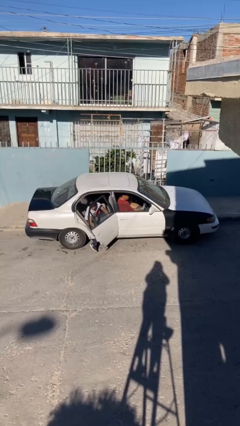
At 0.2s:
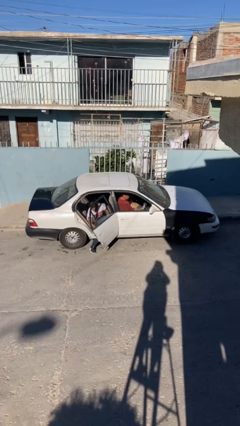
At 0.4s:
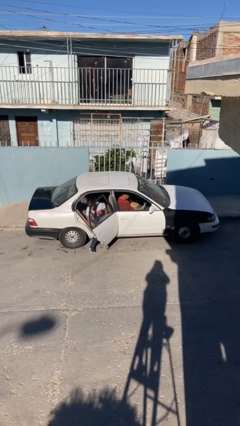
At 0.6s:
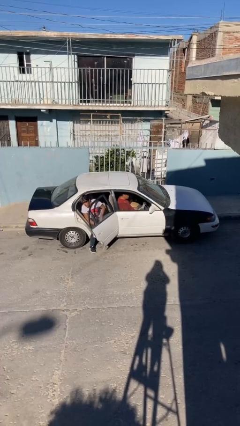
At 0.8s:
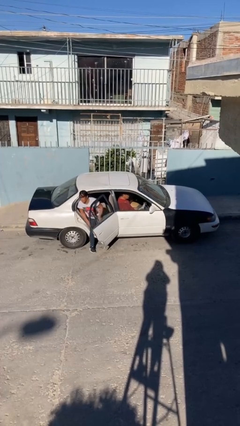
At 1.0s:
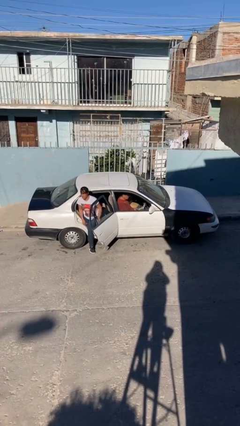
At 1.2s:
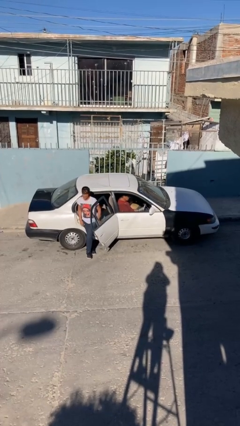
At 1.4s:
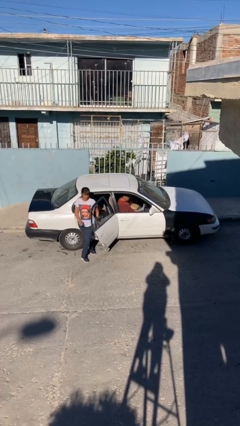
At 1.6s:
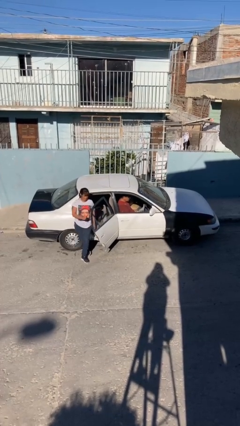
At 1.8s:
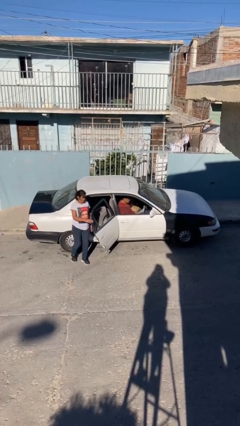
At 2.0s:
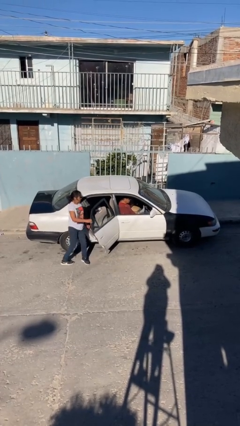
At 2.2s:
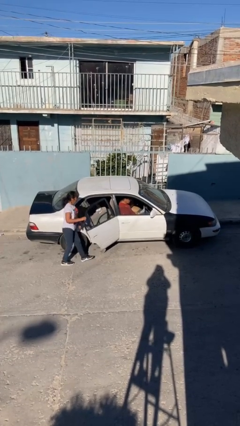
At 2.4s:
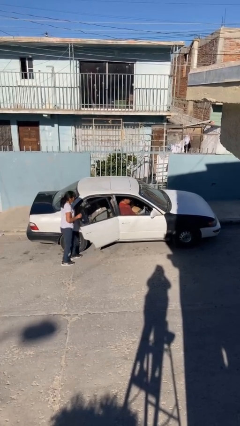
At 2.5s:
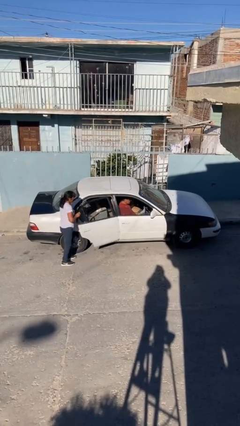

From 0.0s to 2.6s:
car drops off person

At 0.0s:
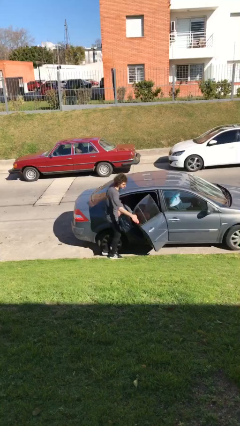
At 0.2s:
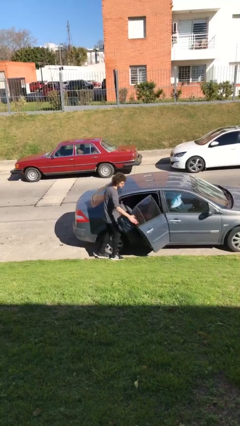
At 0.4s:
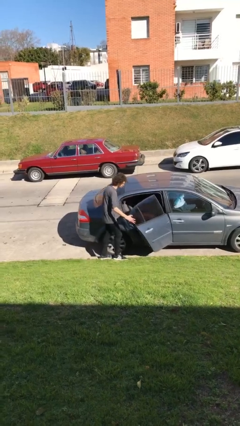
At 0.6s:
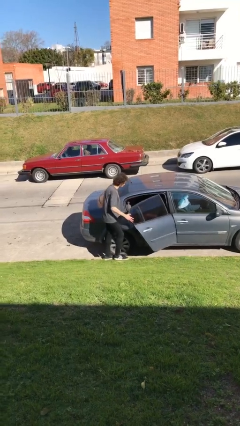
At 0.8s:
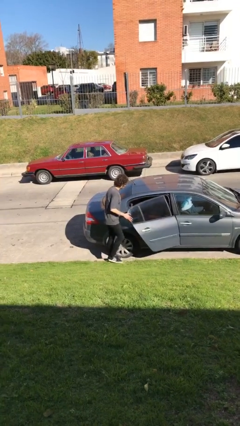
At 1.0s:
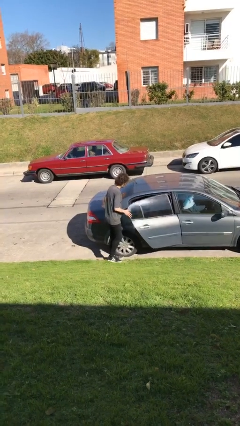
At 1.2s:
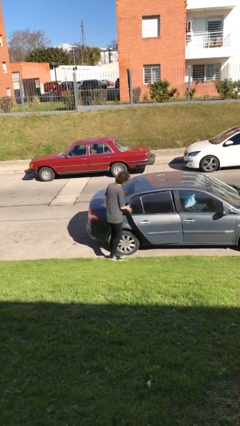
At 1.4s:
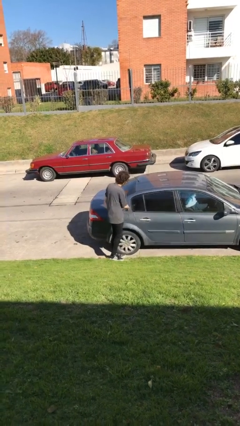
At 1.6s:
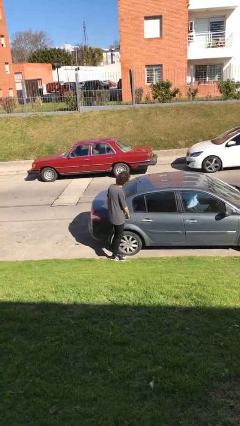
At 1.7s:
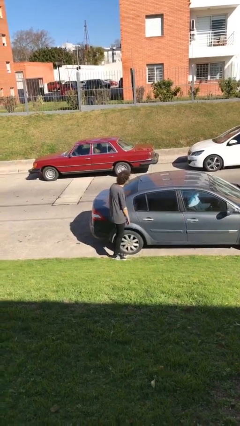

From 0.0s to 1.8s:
person closes car door

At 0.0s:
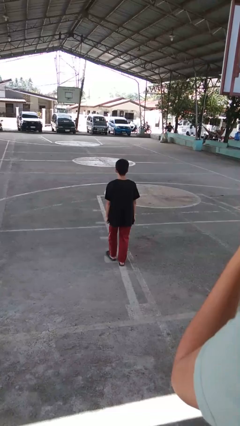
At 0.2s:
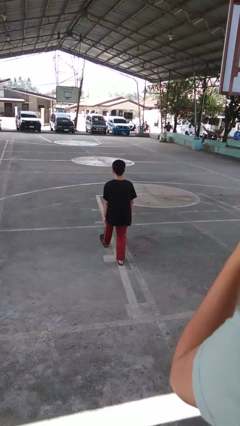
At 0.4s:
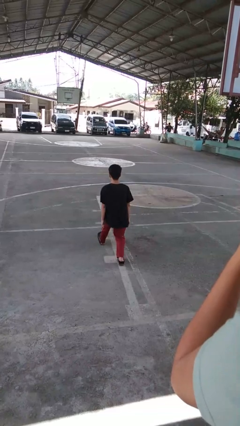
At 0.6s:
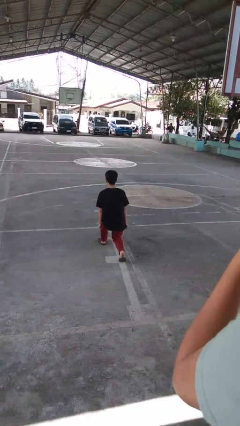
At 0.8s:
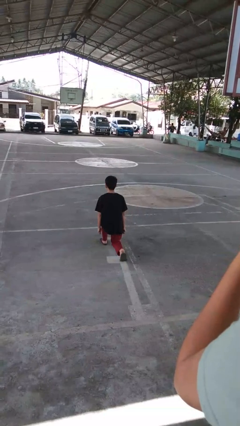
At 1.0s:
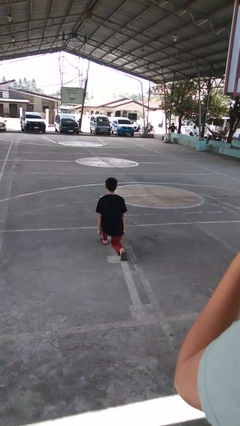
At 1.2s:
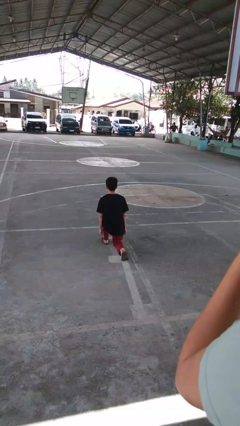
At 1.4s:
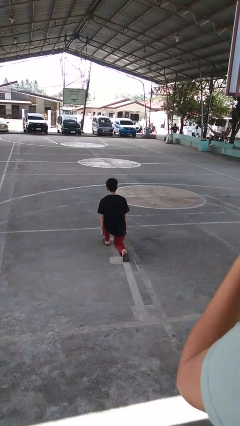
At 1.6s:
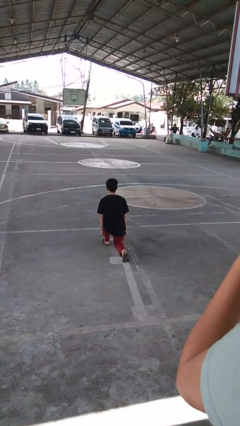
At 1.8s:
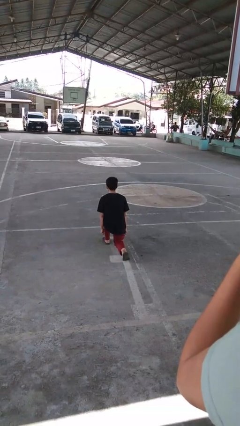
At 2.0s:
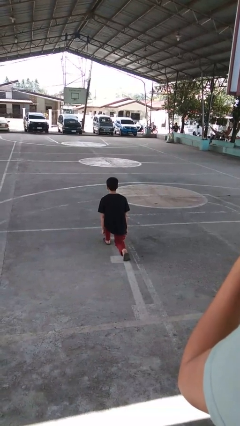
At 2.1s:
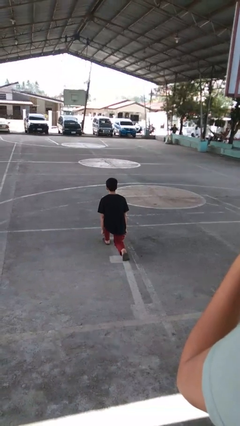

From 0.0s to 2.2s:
person exercises with lunges

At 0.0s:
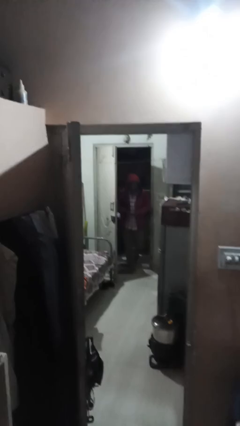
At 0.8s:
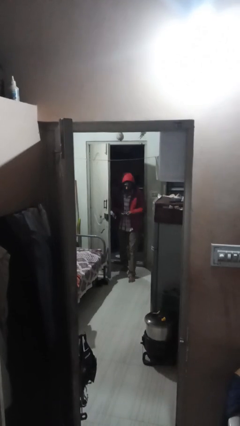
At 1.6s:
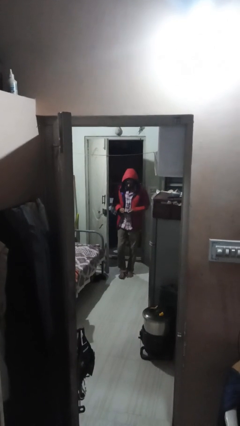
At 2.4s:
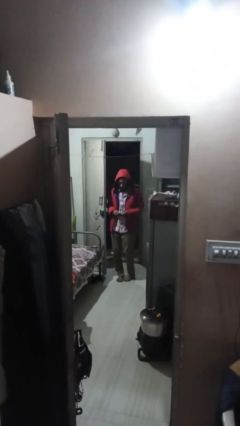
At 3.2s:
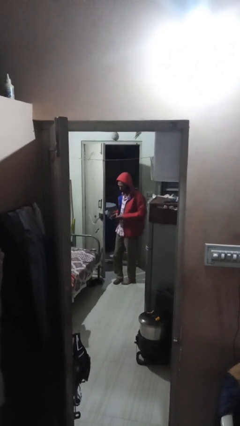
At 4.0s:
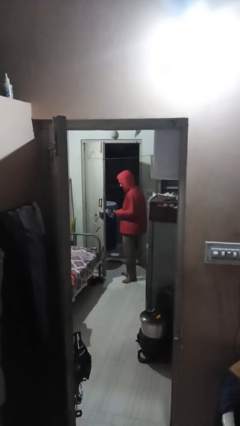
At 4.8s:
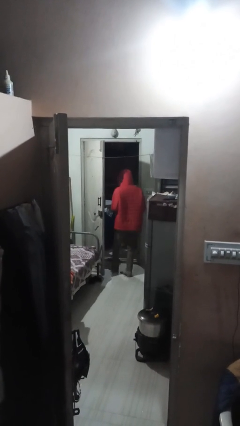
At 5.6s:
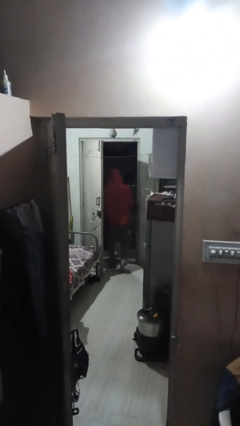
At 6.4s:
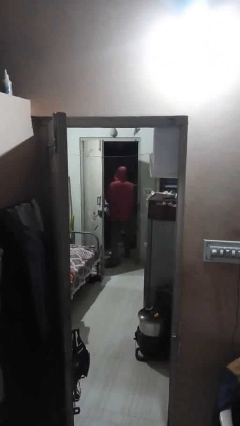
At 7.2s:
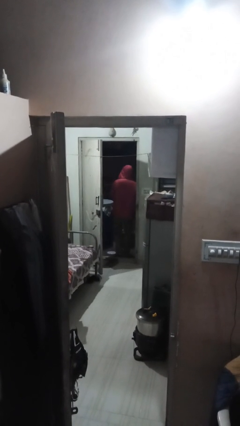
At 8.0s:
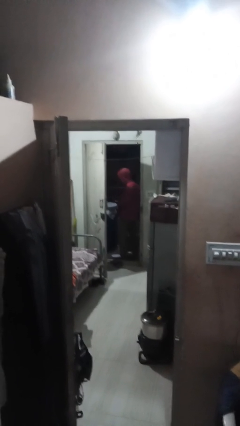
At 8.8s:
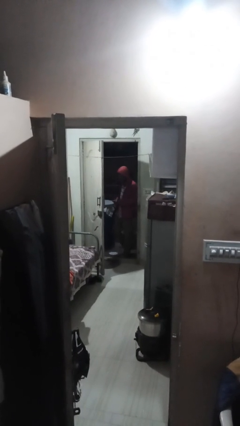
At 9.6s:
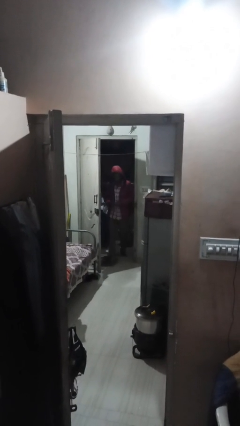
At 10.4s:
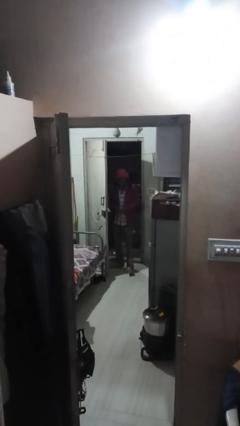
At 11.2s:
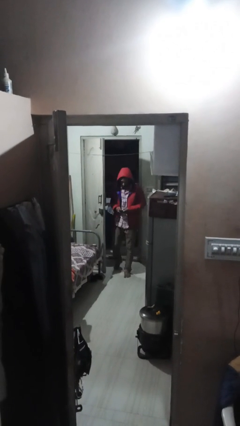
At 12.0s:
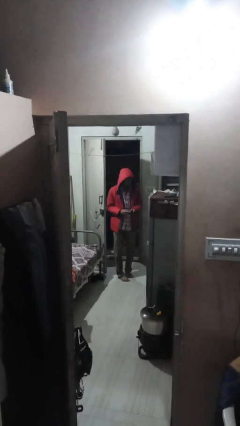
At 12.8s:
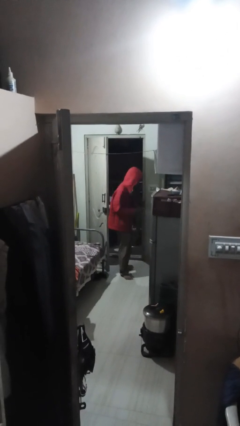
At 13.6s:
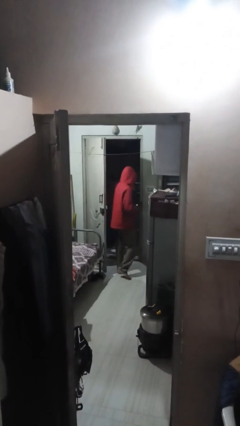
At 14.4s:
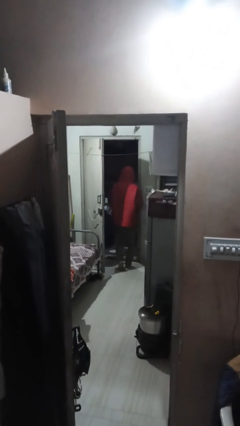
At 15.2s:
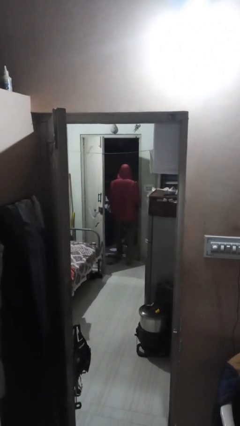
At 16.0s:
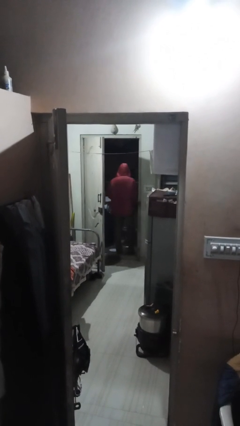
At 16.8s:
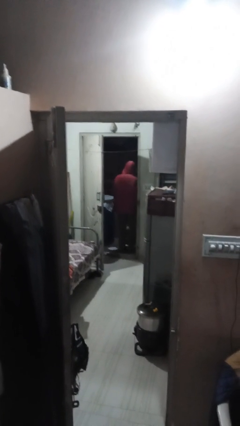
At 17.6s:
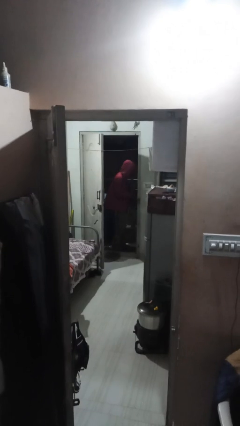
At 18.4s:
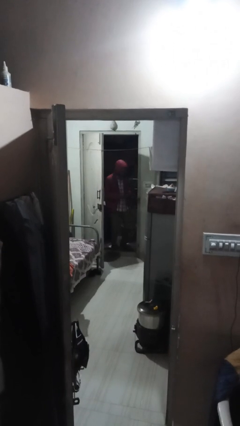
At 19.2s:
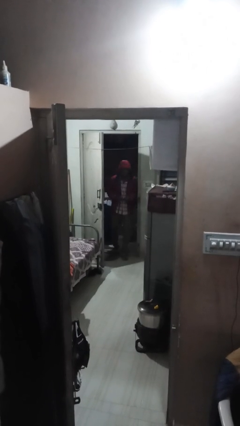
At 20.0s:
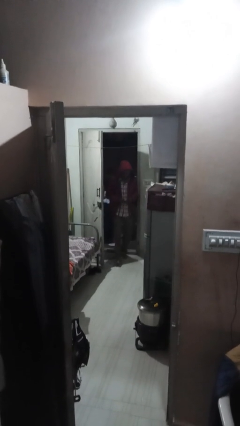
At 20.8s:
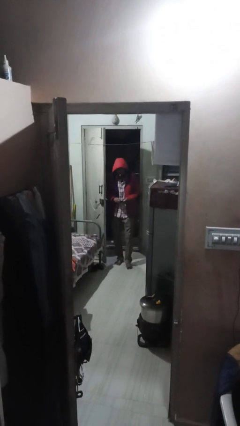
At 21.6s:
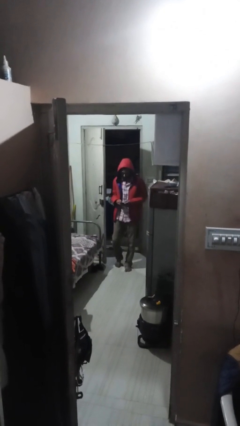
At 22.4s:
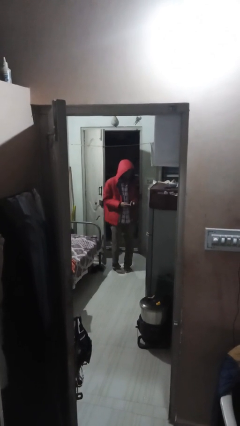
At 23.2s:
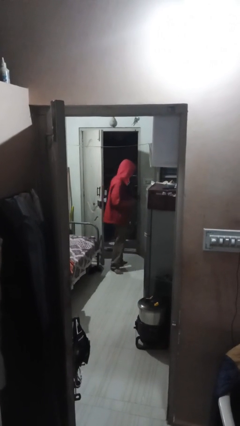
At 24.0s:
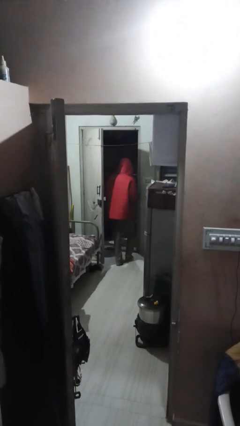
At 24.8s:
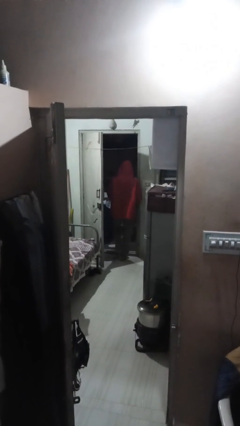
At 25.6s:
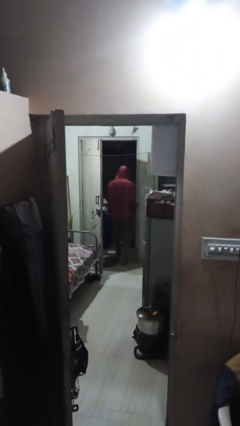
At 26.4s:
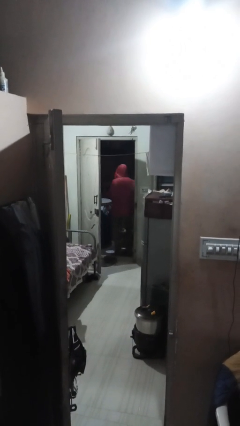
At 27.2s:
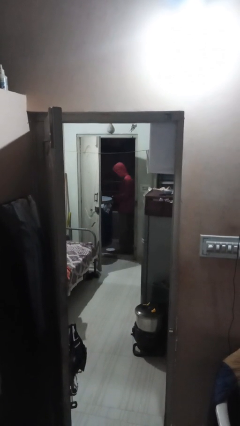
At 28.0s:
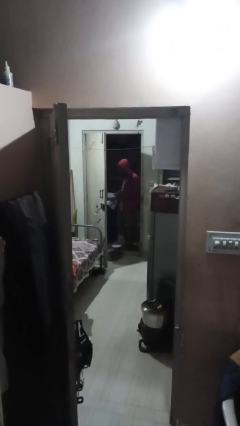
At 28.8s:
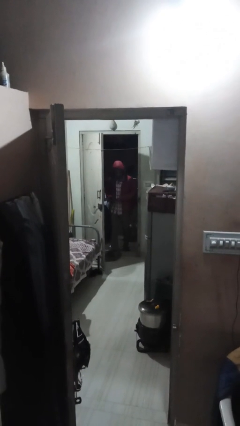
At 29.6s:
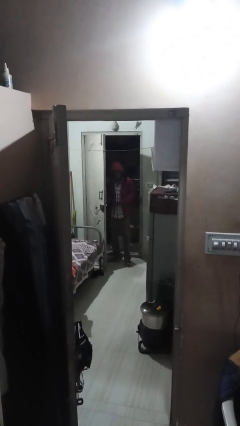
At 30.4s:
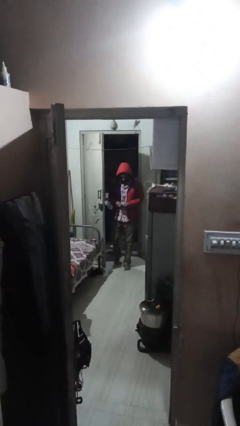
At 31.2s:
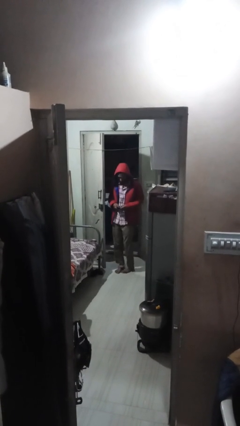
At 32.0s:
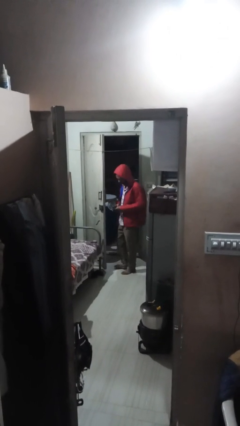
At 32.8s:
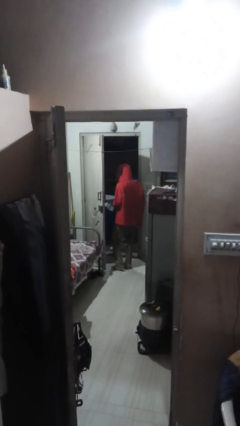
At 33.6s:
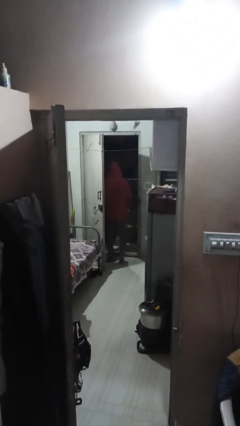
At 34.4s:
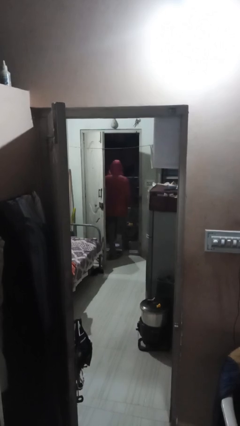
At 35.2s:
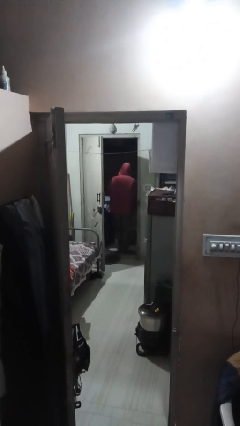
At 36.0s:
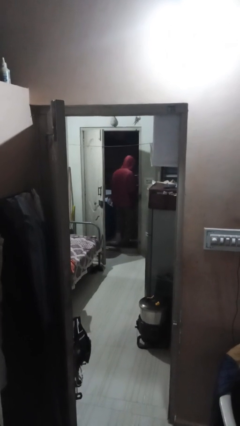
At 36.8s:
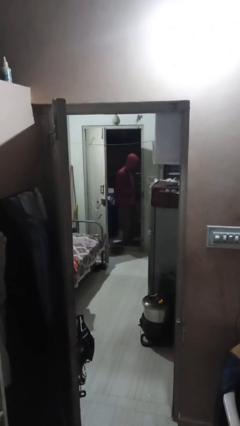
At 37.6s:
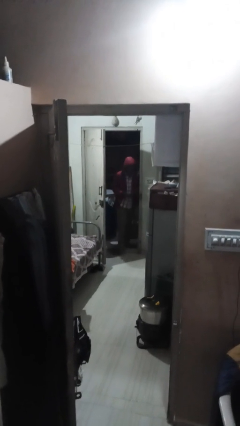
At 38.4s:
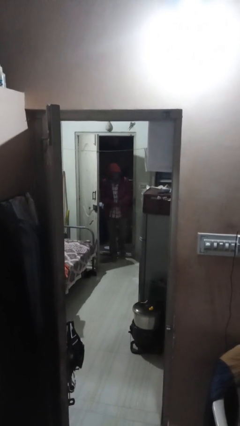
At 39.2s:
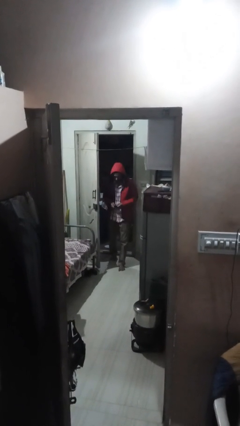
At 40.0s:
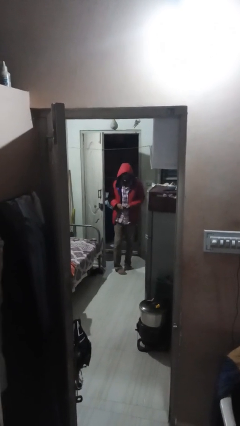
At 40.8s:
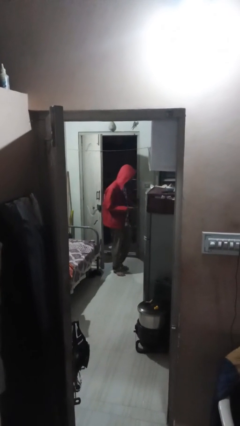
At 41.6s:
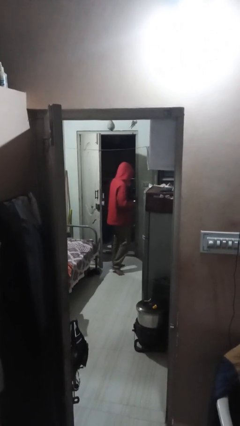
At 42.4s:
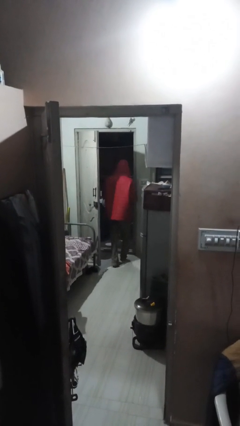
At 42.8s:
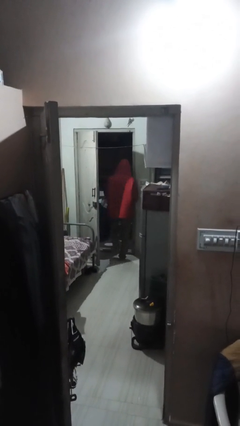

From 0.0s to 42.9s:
person texts on phone

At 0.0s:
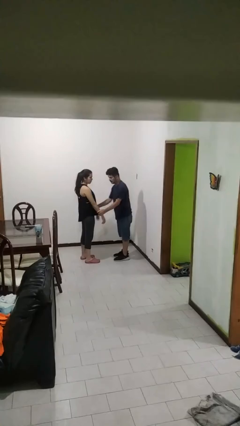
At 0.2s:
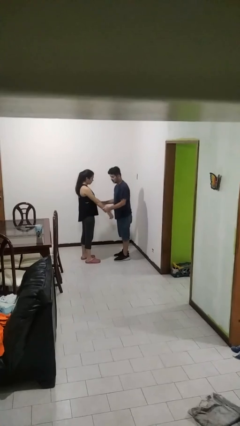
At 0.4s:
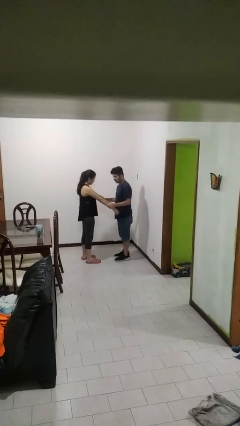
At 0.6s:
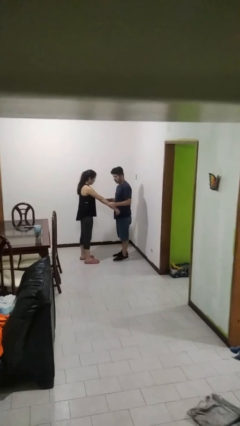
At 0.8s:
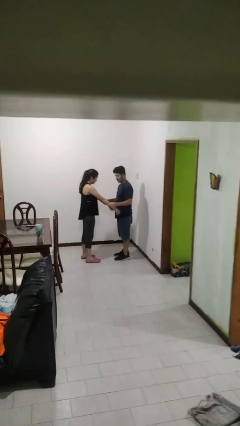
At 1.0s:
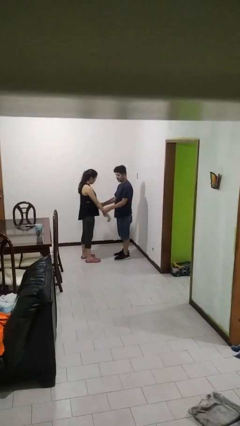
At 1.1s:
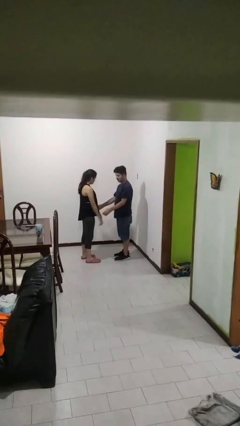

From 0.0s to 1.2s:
person grabs person by forearm
